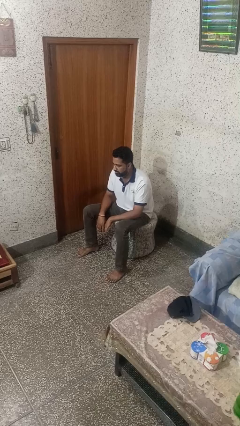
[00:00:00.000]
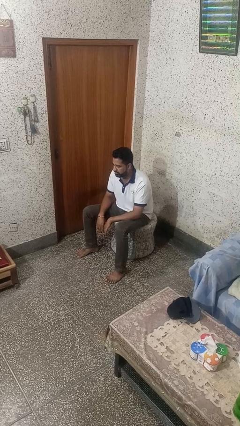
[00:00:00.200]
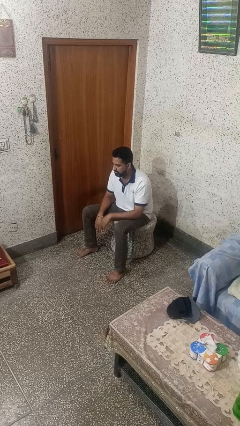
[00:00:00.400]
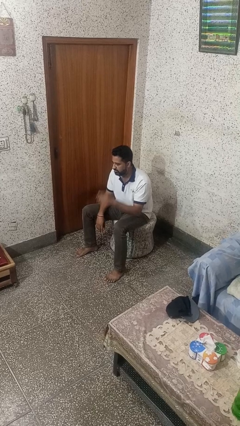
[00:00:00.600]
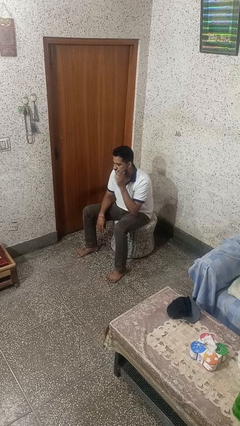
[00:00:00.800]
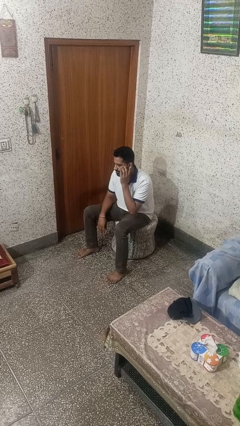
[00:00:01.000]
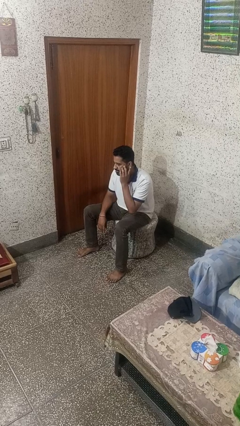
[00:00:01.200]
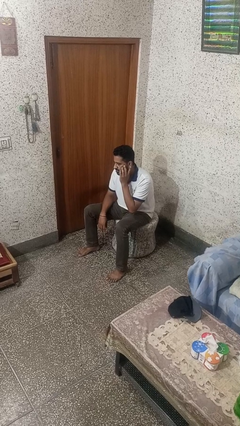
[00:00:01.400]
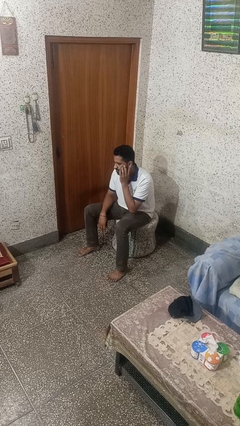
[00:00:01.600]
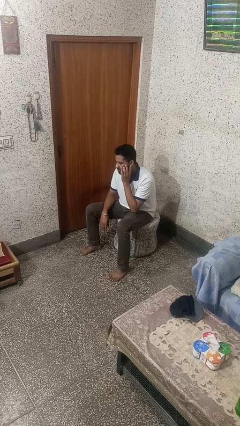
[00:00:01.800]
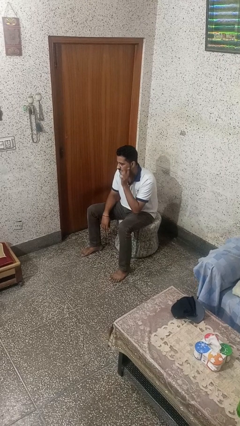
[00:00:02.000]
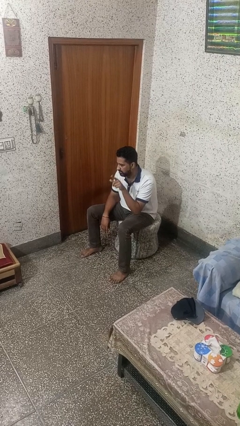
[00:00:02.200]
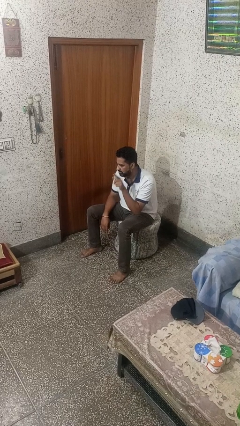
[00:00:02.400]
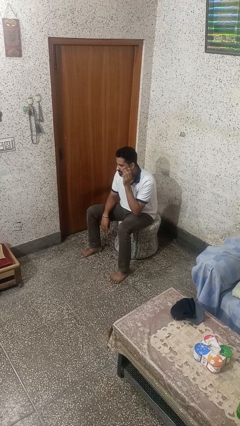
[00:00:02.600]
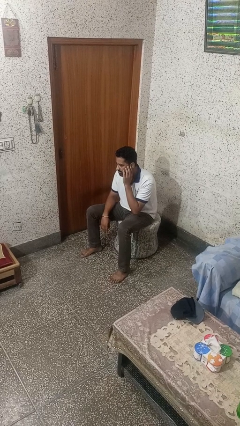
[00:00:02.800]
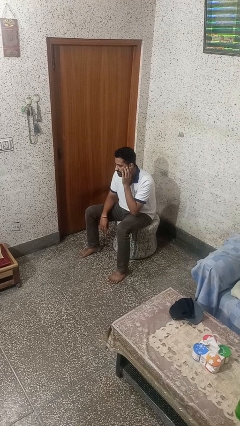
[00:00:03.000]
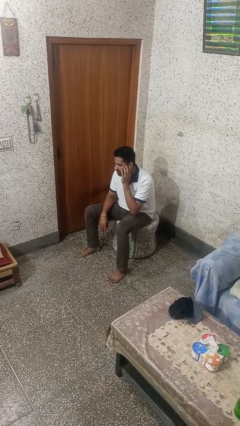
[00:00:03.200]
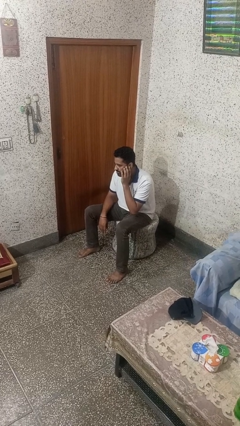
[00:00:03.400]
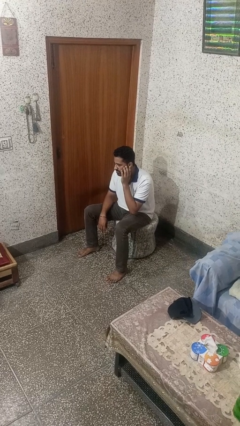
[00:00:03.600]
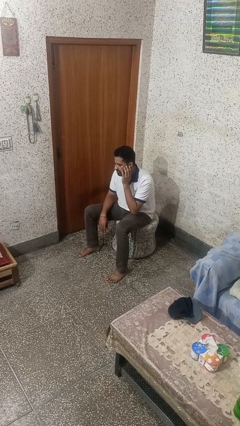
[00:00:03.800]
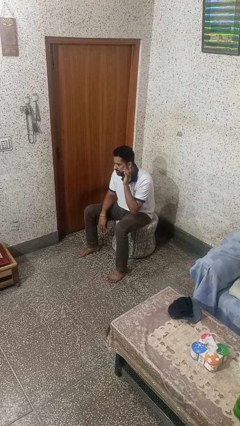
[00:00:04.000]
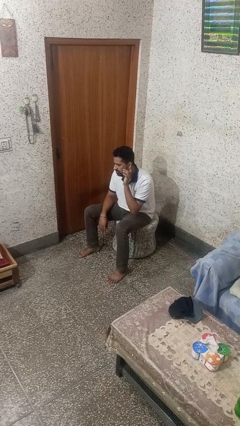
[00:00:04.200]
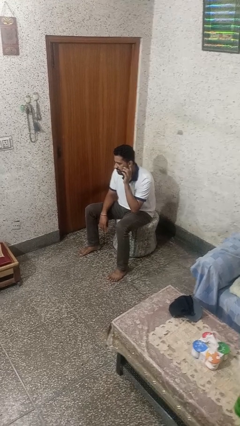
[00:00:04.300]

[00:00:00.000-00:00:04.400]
person gestures listen closely

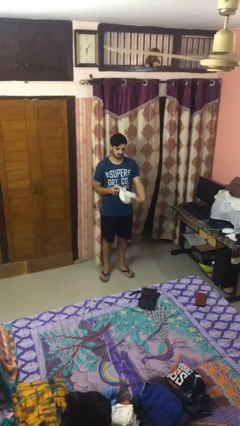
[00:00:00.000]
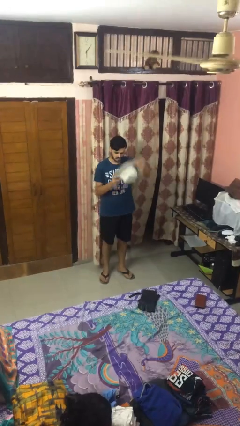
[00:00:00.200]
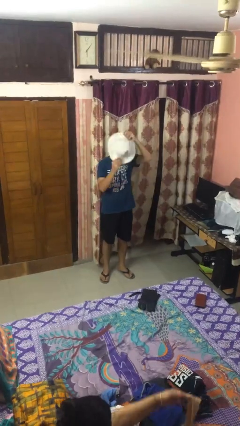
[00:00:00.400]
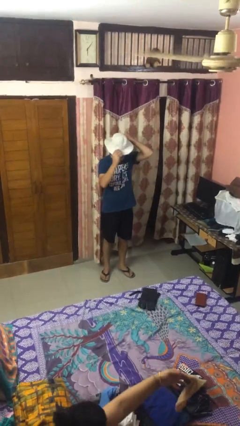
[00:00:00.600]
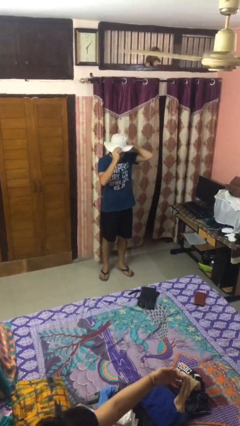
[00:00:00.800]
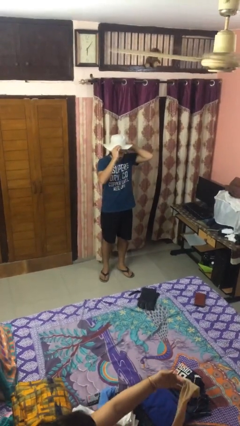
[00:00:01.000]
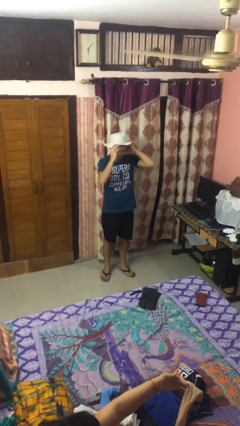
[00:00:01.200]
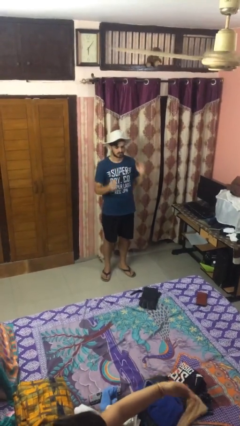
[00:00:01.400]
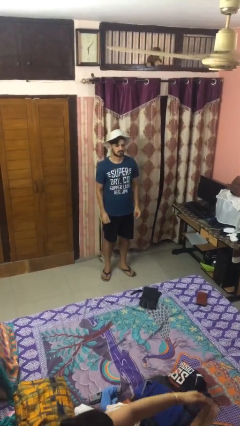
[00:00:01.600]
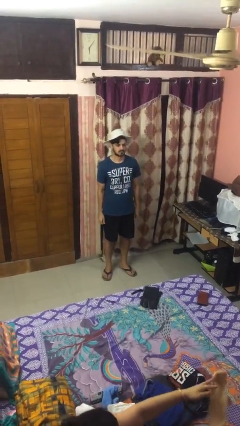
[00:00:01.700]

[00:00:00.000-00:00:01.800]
person puts on hat

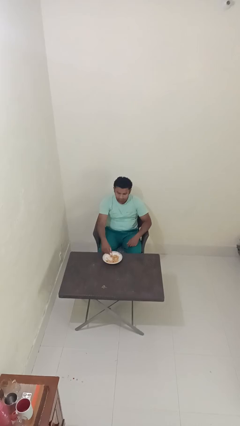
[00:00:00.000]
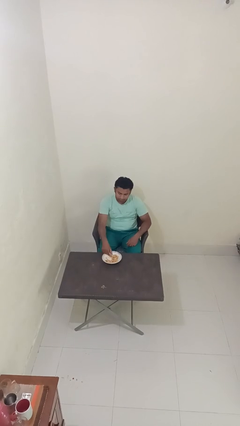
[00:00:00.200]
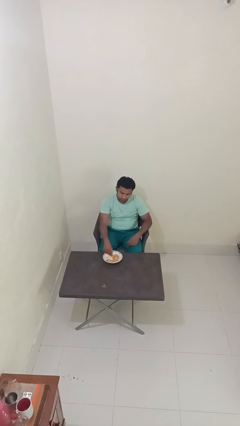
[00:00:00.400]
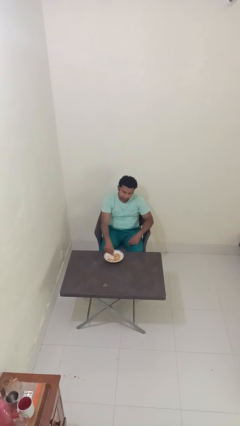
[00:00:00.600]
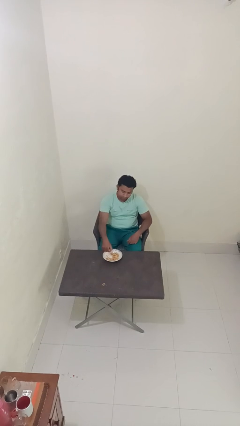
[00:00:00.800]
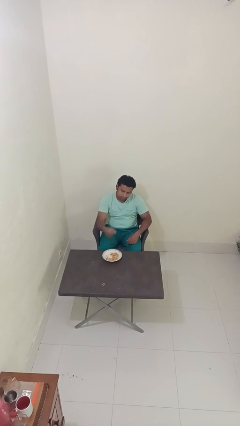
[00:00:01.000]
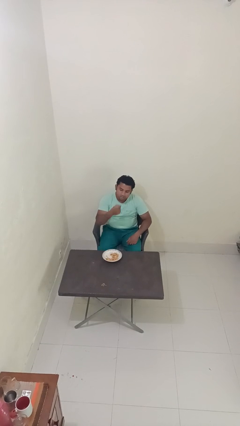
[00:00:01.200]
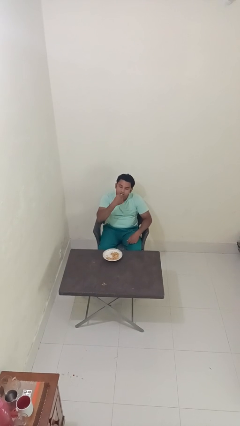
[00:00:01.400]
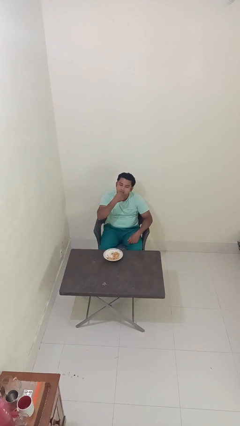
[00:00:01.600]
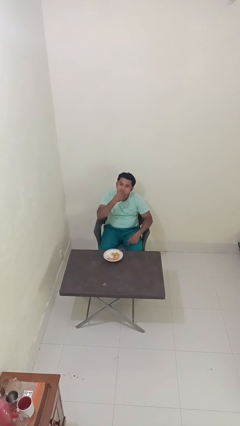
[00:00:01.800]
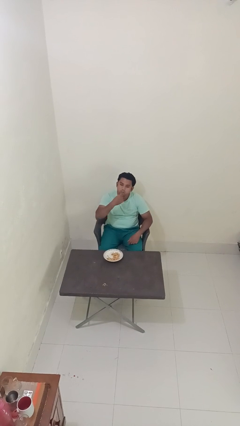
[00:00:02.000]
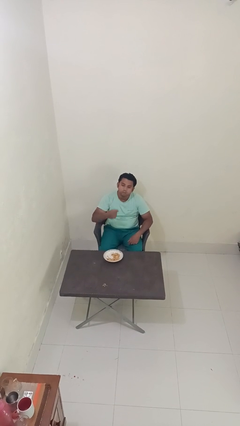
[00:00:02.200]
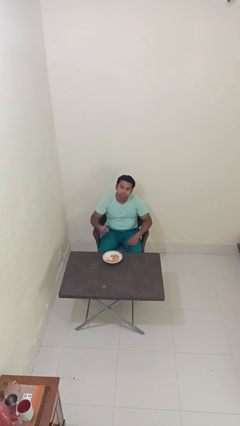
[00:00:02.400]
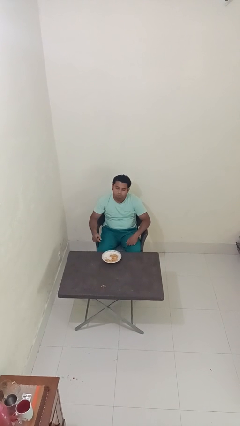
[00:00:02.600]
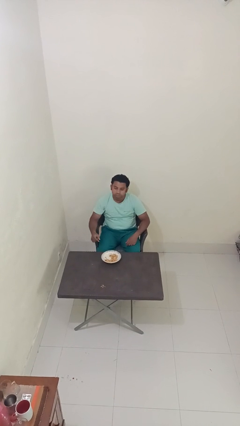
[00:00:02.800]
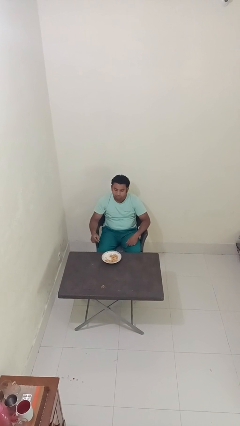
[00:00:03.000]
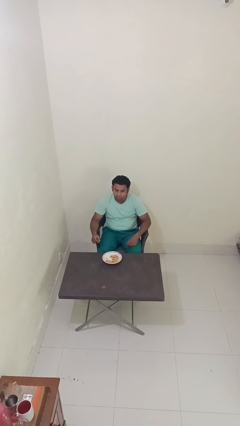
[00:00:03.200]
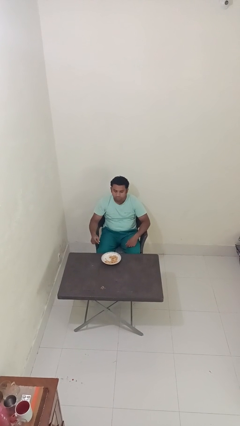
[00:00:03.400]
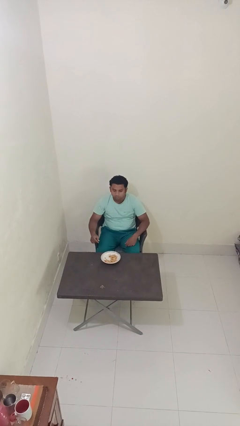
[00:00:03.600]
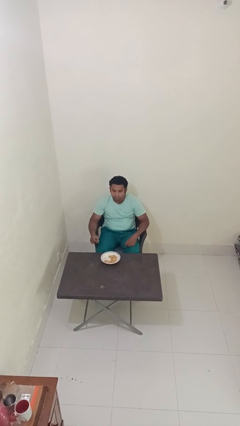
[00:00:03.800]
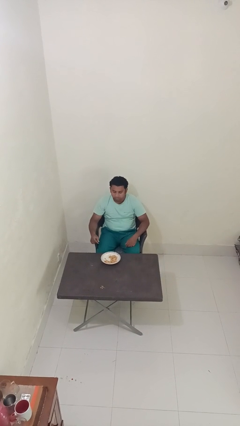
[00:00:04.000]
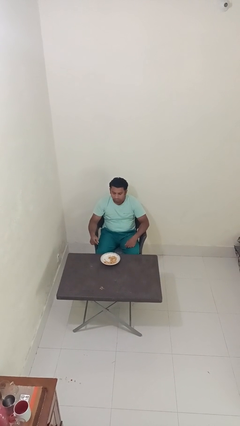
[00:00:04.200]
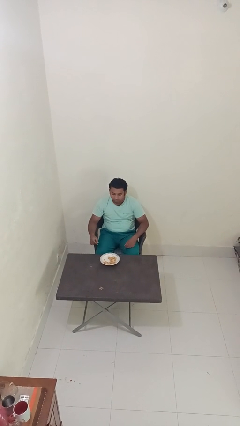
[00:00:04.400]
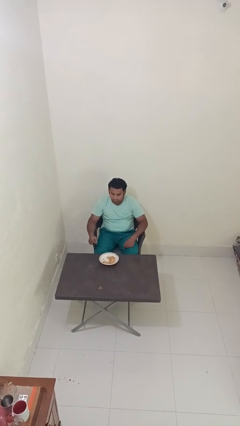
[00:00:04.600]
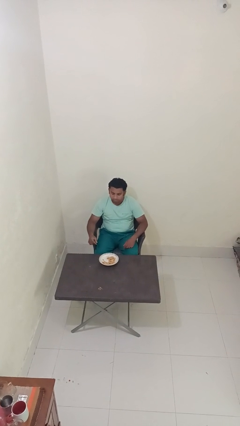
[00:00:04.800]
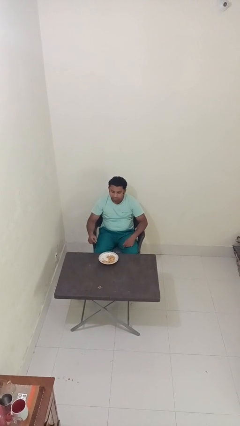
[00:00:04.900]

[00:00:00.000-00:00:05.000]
person eats with hands

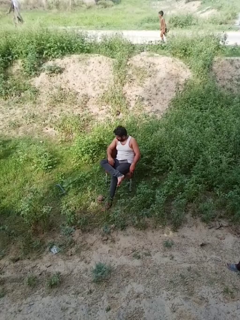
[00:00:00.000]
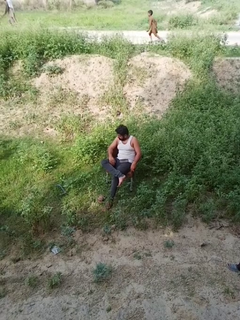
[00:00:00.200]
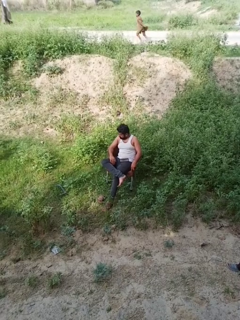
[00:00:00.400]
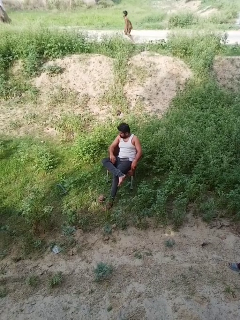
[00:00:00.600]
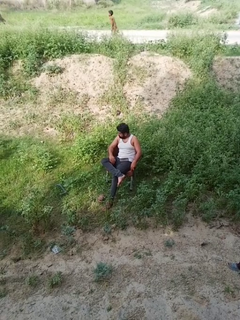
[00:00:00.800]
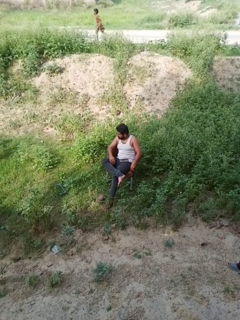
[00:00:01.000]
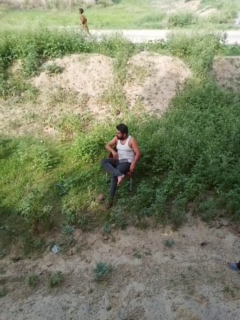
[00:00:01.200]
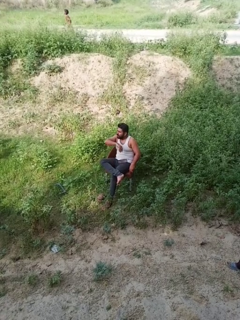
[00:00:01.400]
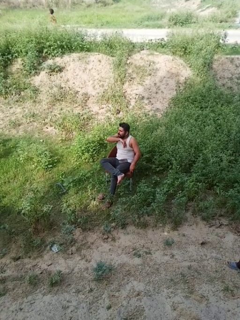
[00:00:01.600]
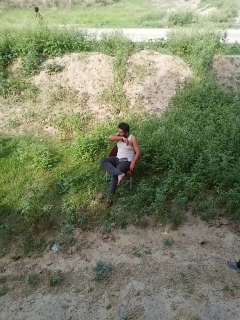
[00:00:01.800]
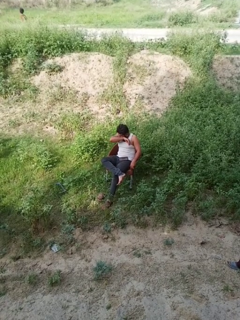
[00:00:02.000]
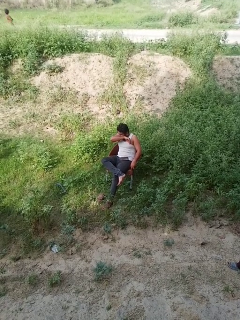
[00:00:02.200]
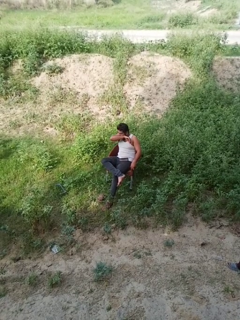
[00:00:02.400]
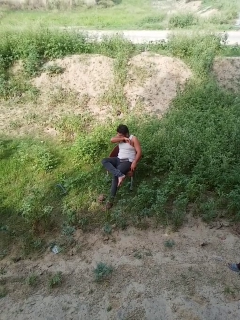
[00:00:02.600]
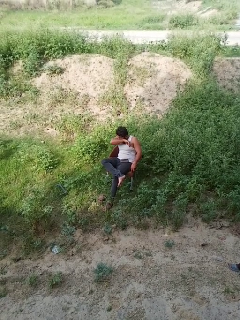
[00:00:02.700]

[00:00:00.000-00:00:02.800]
person sneezes into arm

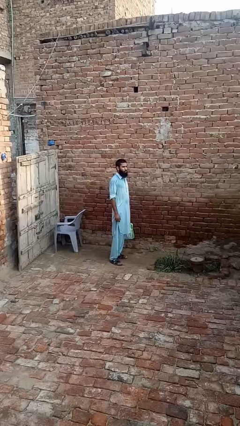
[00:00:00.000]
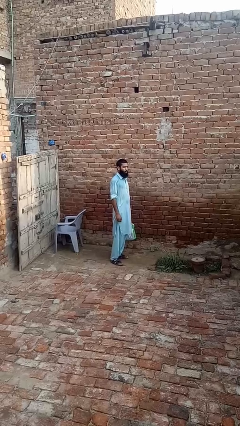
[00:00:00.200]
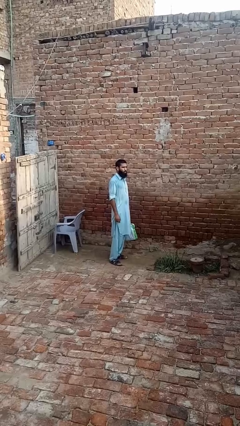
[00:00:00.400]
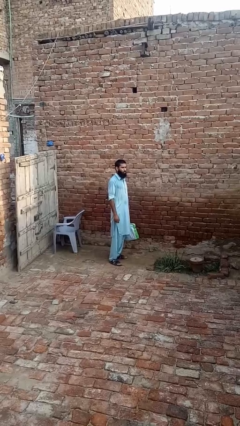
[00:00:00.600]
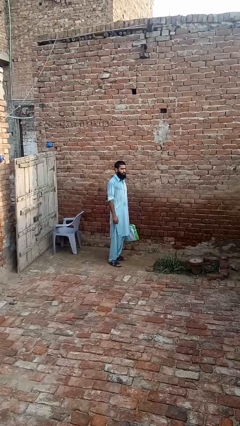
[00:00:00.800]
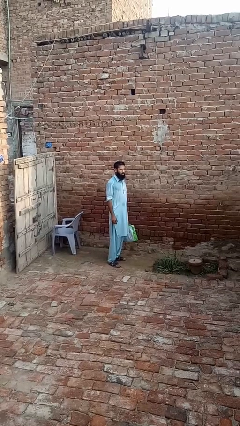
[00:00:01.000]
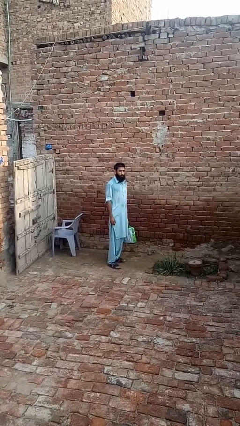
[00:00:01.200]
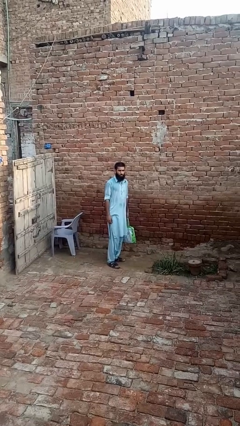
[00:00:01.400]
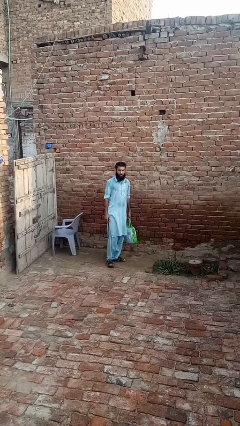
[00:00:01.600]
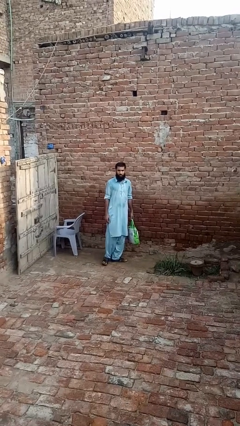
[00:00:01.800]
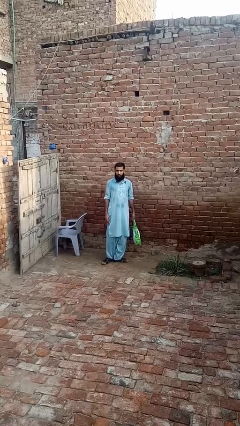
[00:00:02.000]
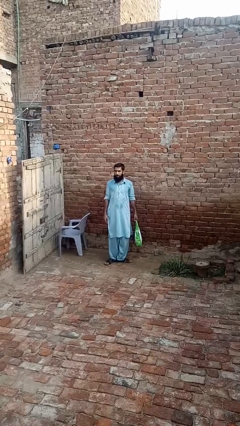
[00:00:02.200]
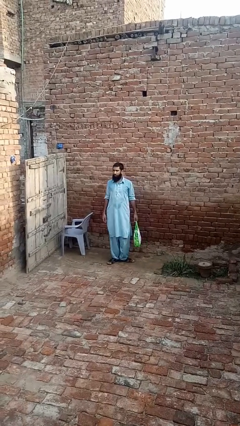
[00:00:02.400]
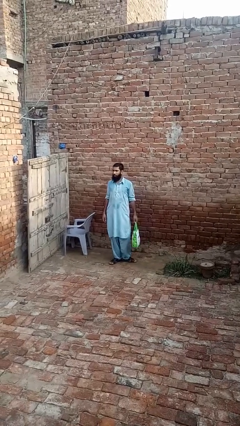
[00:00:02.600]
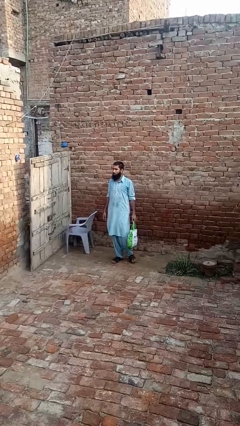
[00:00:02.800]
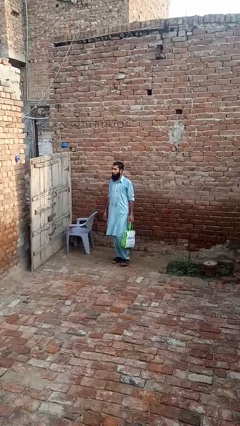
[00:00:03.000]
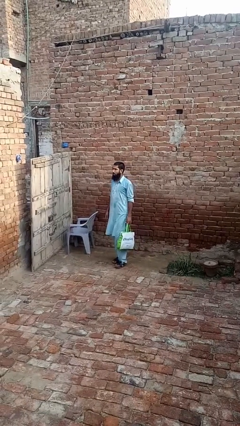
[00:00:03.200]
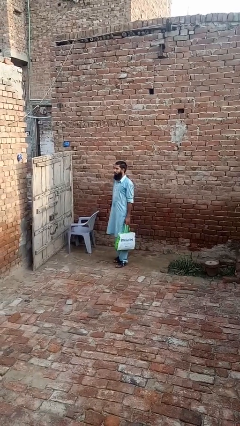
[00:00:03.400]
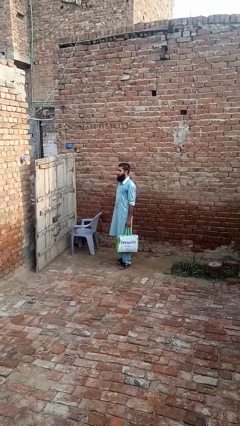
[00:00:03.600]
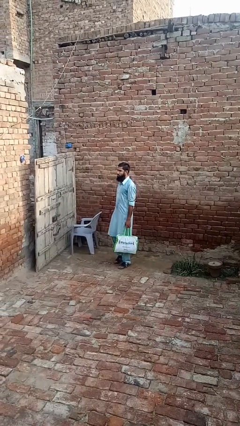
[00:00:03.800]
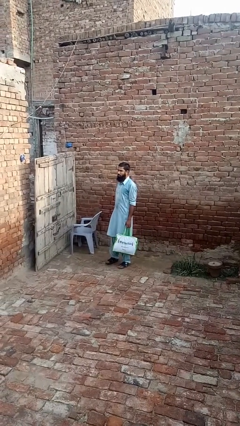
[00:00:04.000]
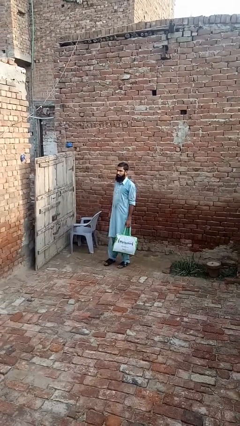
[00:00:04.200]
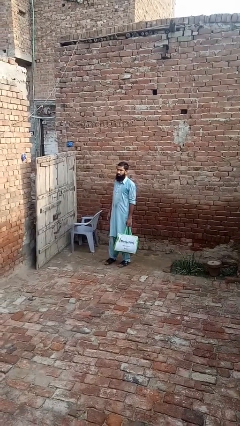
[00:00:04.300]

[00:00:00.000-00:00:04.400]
person carries groceries
